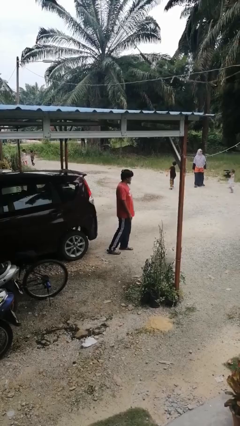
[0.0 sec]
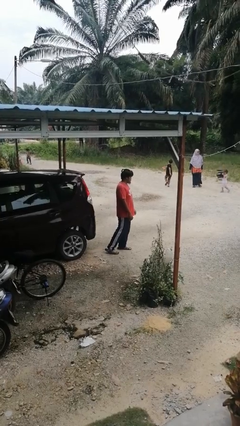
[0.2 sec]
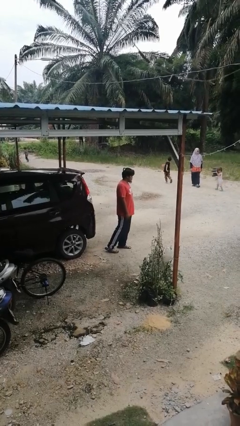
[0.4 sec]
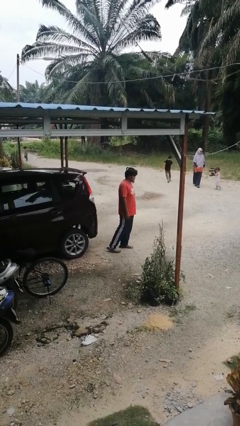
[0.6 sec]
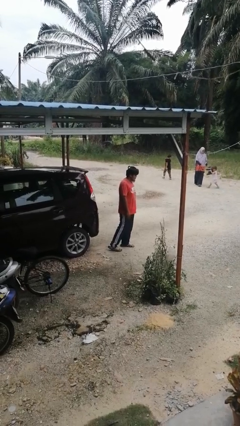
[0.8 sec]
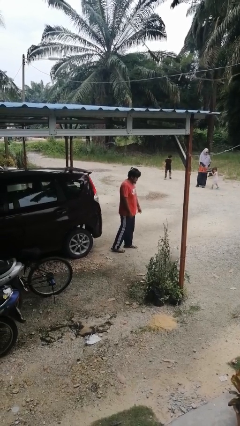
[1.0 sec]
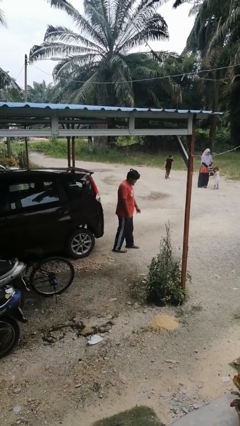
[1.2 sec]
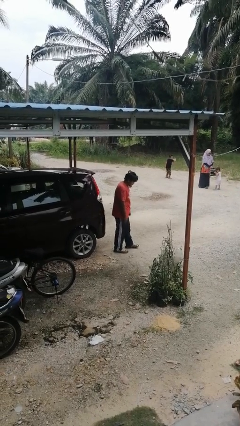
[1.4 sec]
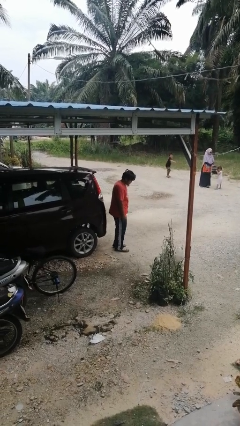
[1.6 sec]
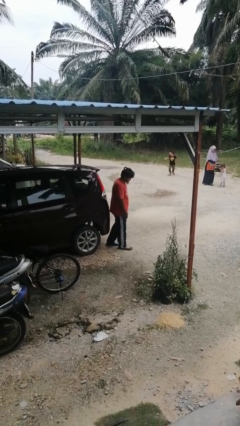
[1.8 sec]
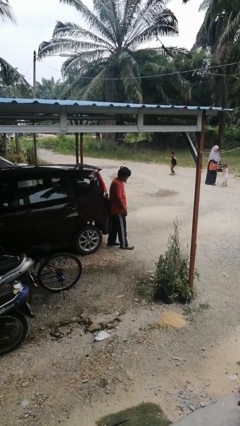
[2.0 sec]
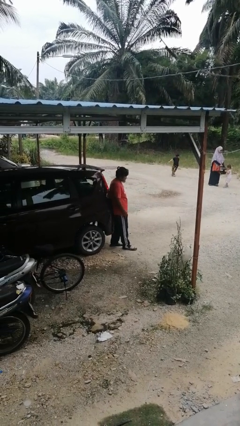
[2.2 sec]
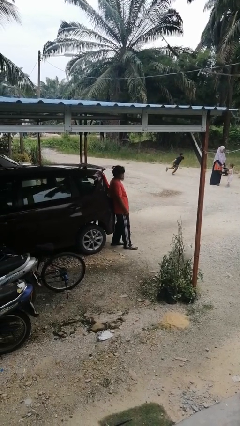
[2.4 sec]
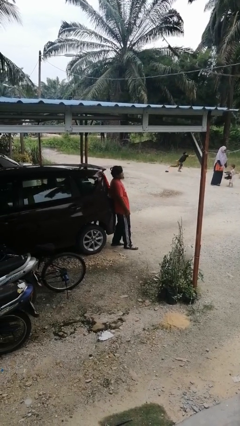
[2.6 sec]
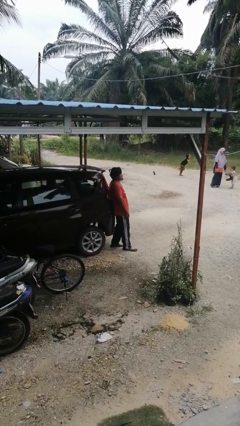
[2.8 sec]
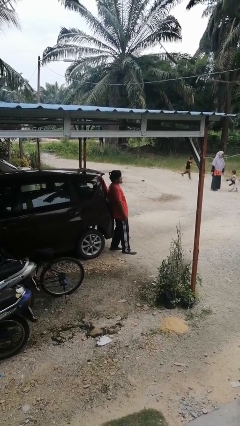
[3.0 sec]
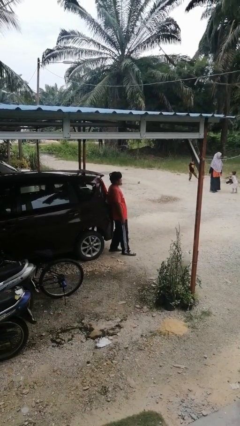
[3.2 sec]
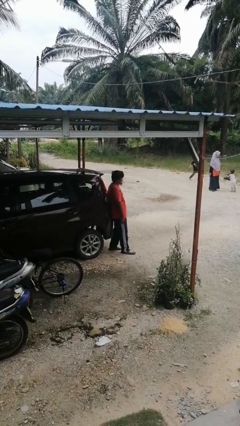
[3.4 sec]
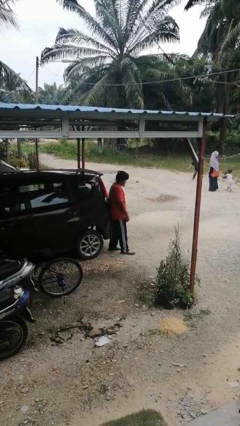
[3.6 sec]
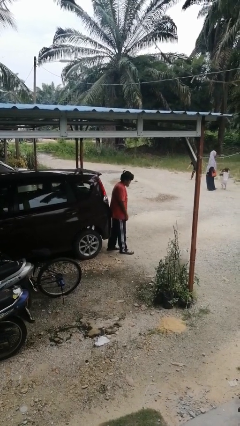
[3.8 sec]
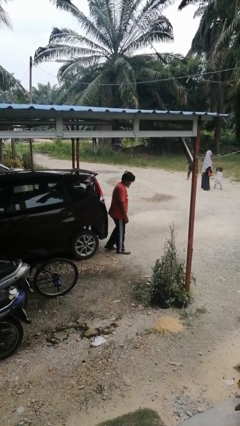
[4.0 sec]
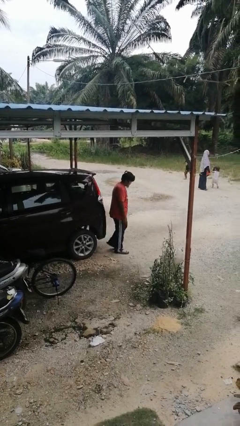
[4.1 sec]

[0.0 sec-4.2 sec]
person leans against car

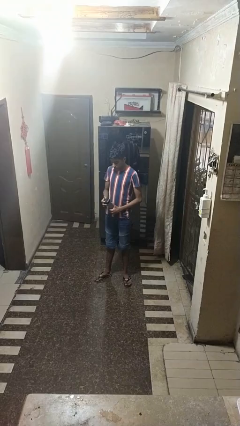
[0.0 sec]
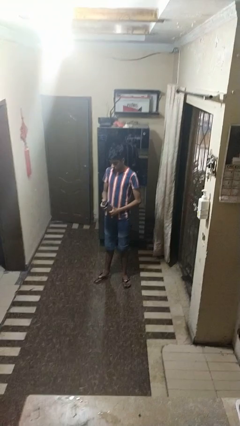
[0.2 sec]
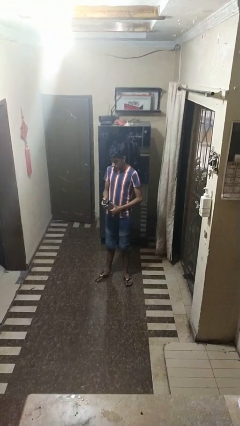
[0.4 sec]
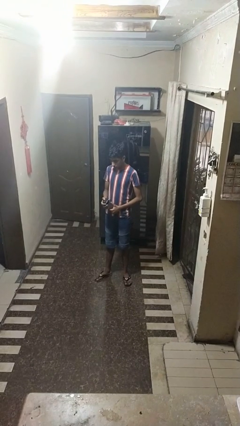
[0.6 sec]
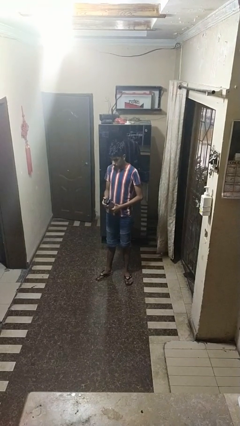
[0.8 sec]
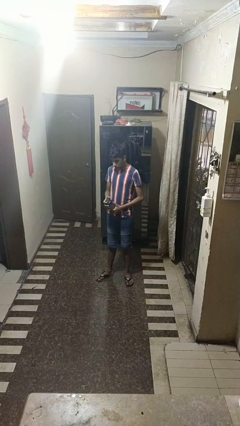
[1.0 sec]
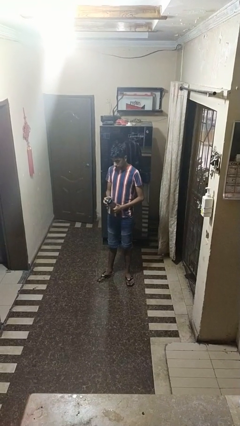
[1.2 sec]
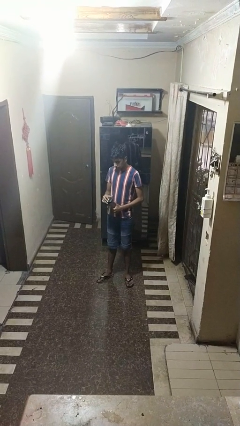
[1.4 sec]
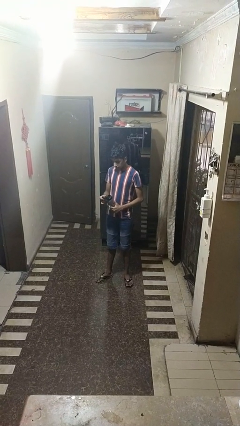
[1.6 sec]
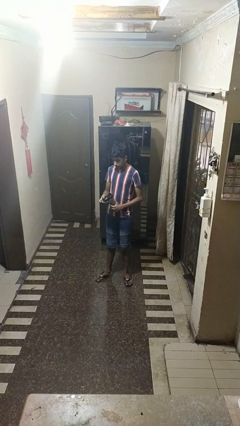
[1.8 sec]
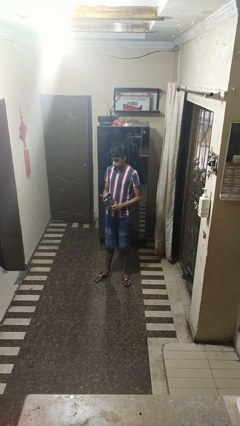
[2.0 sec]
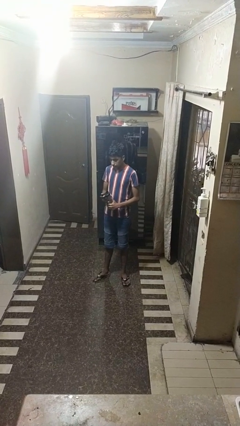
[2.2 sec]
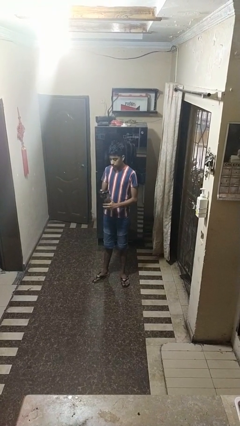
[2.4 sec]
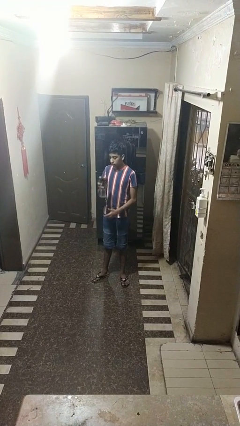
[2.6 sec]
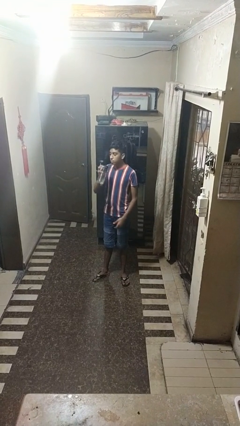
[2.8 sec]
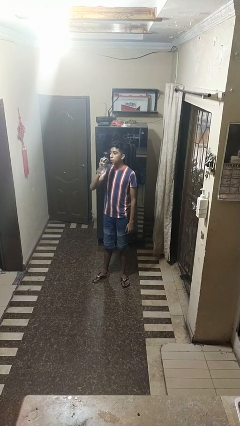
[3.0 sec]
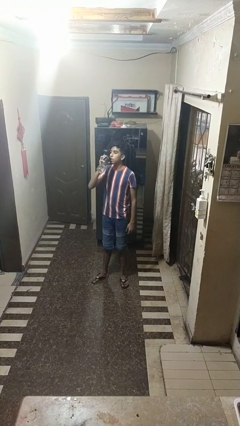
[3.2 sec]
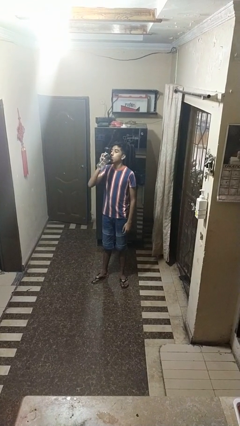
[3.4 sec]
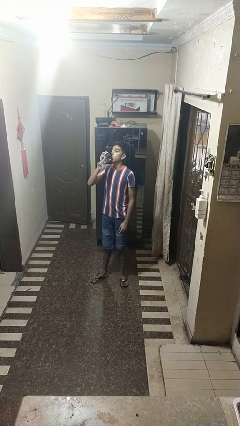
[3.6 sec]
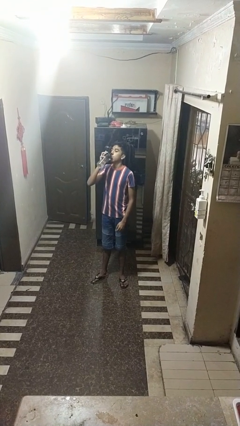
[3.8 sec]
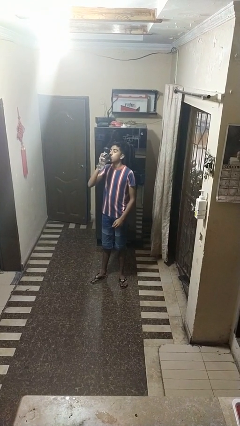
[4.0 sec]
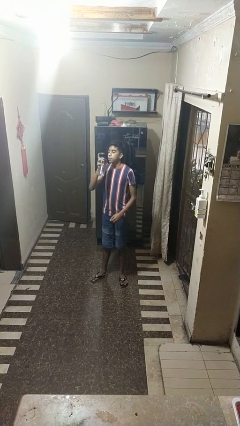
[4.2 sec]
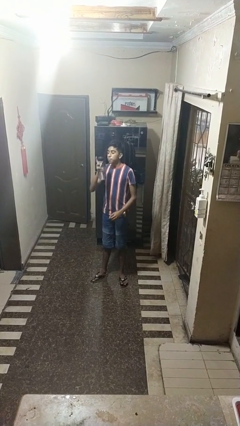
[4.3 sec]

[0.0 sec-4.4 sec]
person drinks from bottle

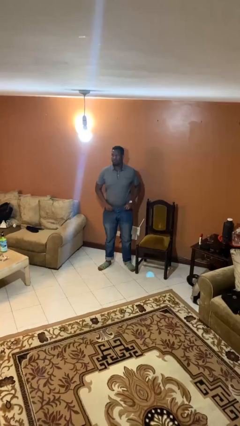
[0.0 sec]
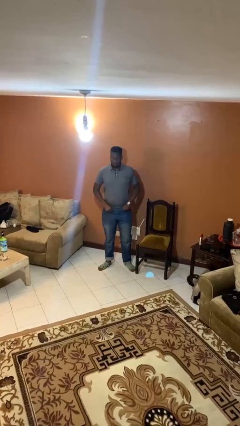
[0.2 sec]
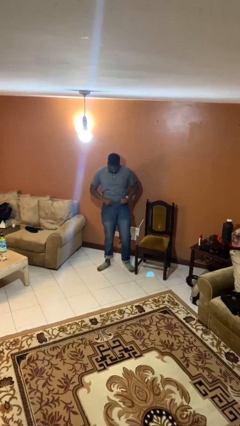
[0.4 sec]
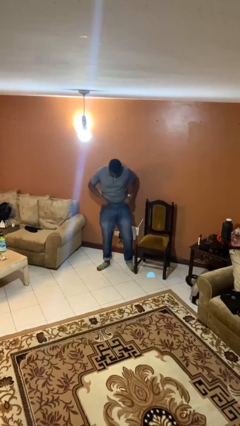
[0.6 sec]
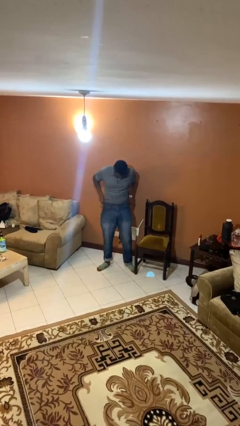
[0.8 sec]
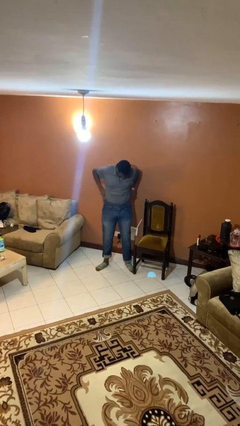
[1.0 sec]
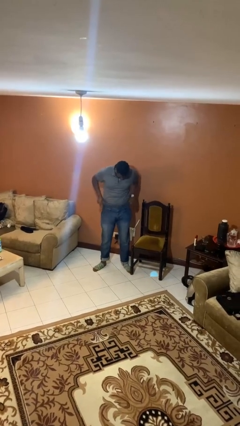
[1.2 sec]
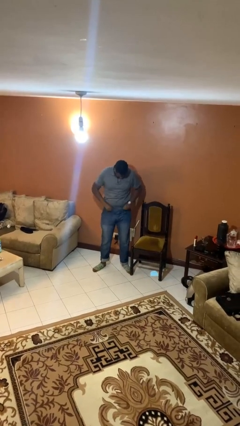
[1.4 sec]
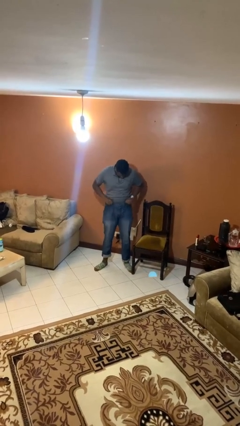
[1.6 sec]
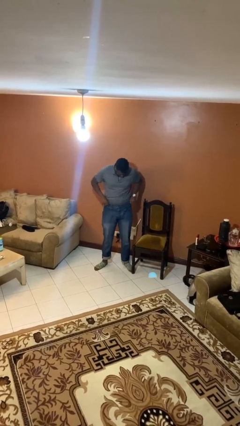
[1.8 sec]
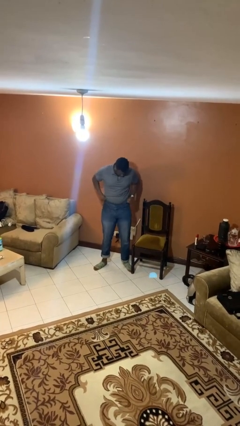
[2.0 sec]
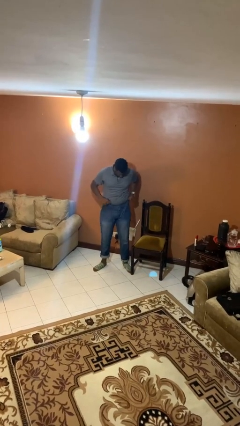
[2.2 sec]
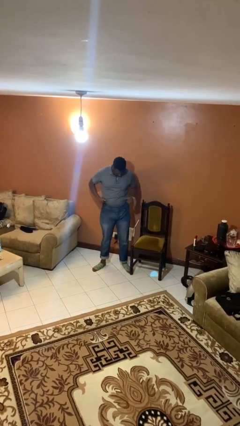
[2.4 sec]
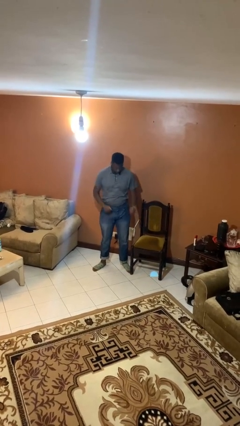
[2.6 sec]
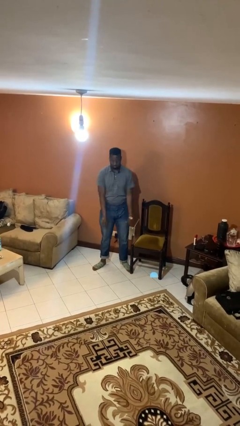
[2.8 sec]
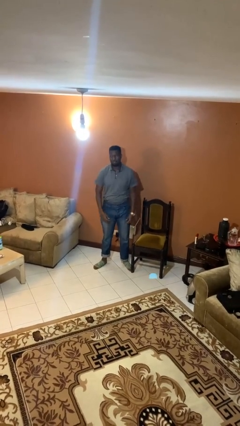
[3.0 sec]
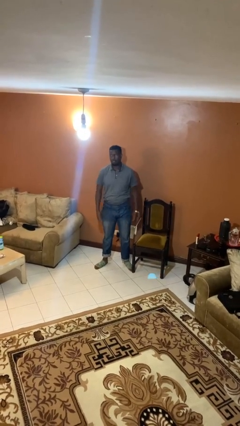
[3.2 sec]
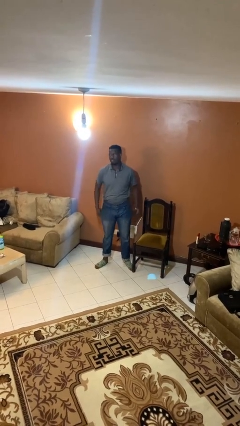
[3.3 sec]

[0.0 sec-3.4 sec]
person hikes up pants

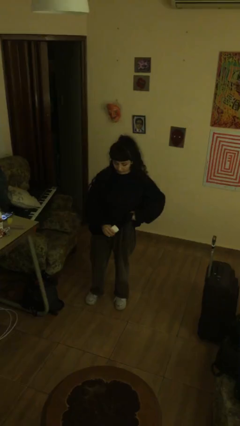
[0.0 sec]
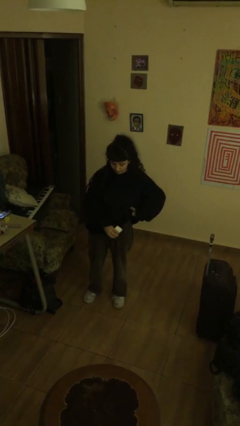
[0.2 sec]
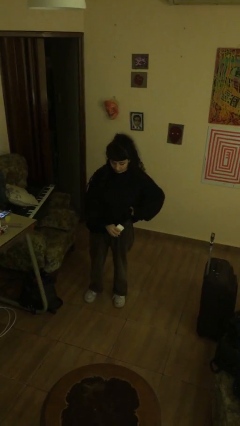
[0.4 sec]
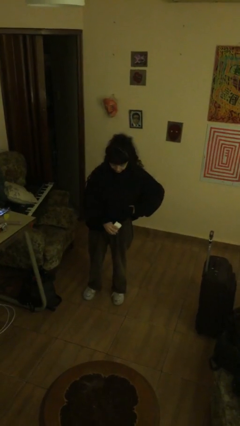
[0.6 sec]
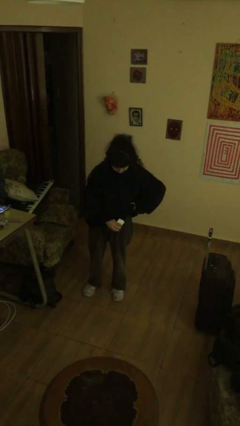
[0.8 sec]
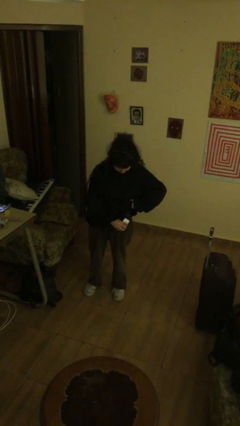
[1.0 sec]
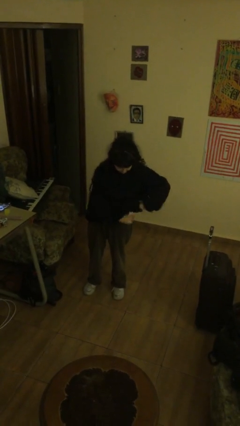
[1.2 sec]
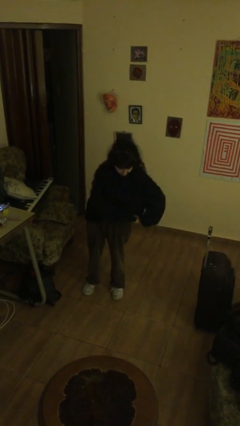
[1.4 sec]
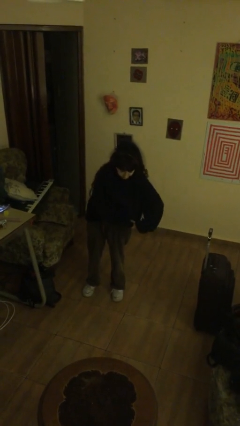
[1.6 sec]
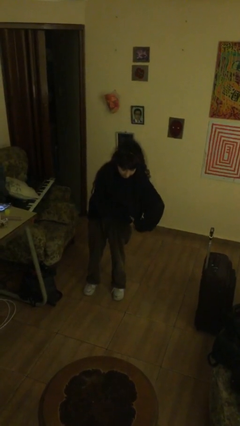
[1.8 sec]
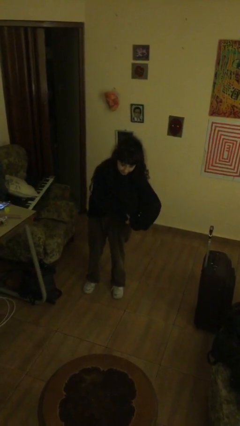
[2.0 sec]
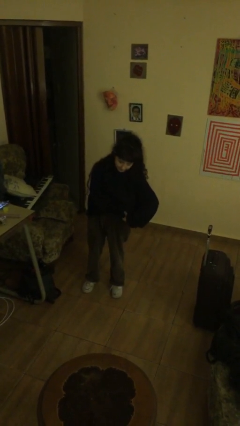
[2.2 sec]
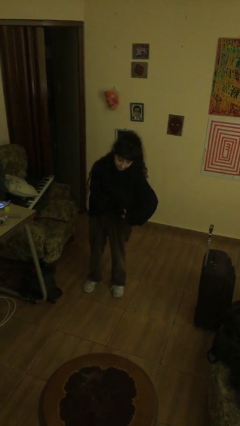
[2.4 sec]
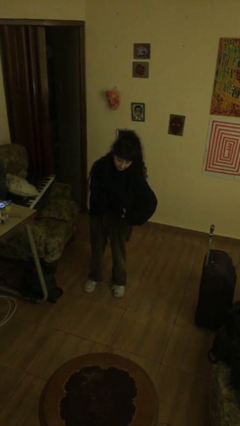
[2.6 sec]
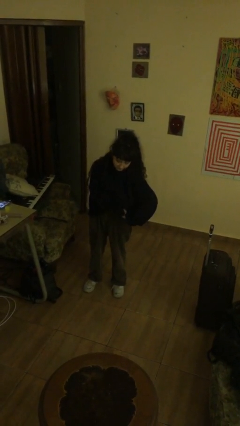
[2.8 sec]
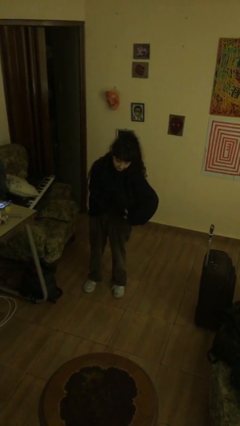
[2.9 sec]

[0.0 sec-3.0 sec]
person applies deodorant

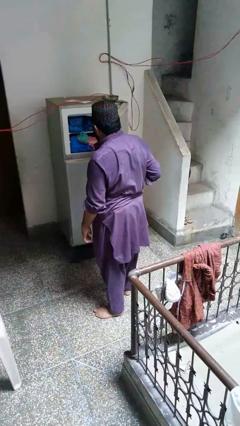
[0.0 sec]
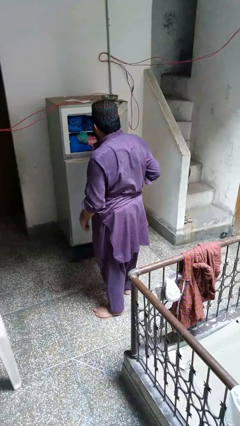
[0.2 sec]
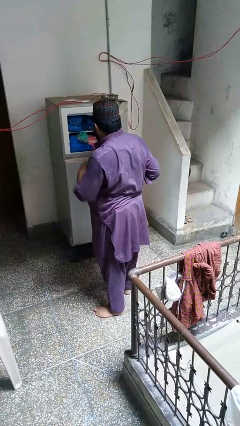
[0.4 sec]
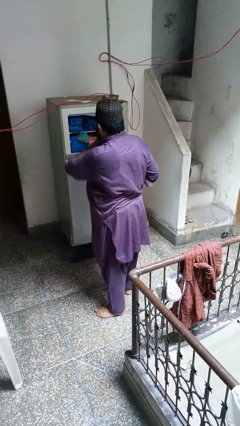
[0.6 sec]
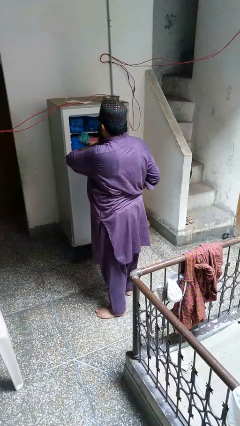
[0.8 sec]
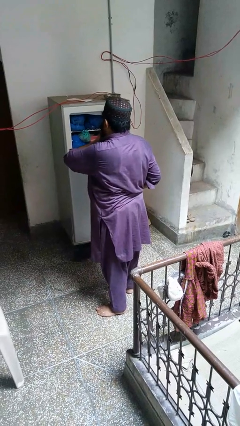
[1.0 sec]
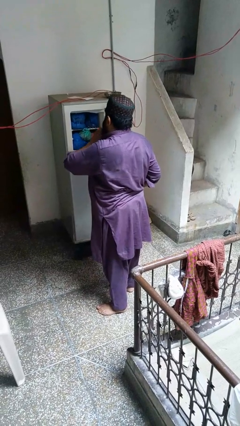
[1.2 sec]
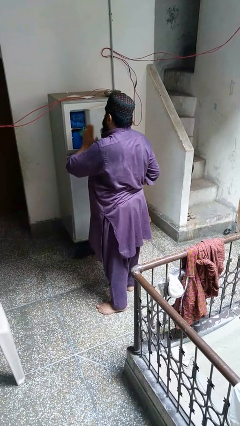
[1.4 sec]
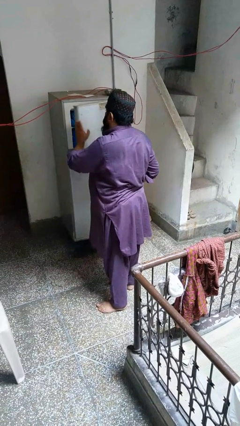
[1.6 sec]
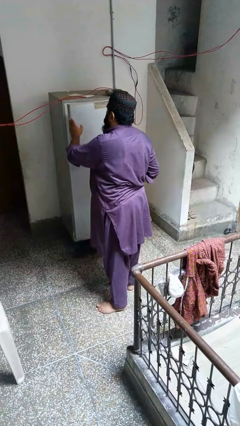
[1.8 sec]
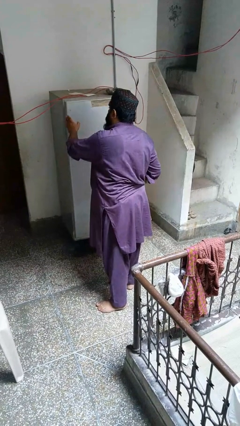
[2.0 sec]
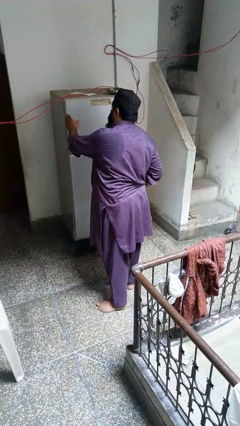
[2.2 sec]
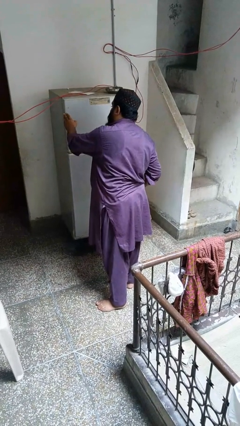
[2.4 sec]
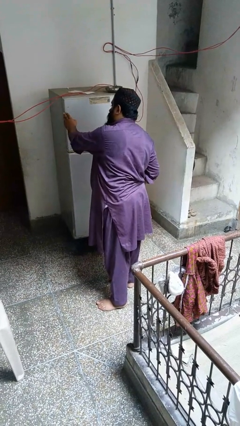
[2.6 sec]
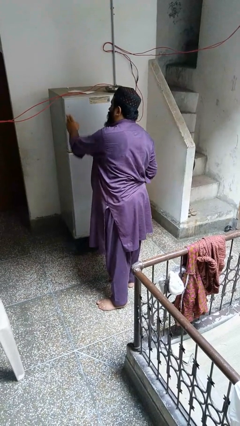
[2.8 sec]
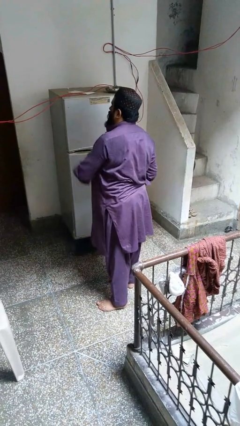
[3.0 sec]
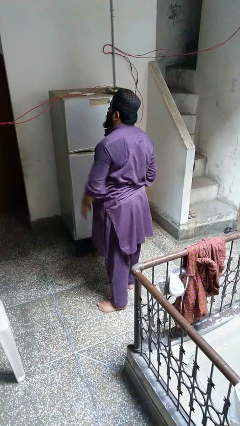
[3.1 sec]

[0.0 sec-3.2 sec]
person closes refrigerator
